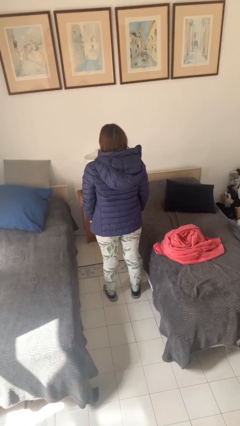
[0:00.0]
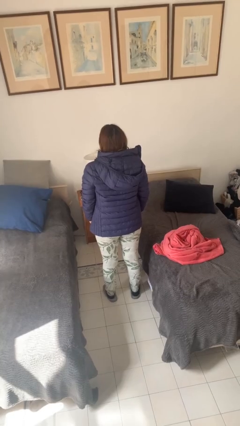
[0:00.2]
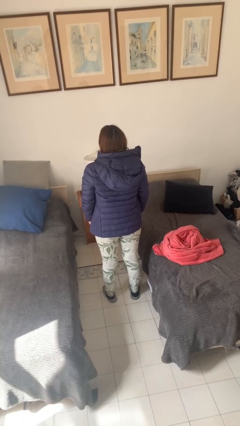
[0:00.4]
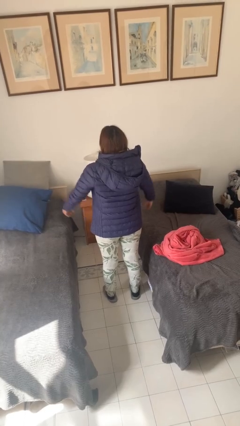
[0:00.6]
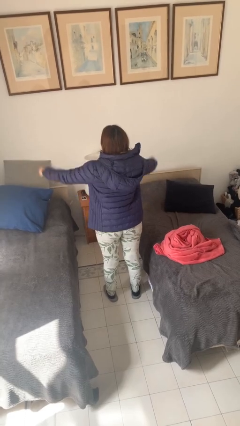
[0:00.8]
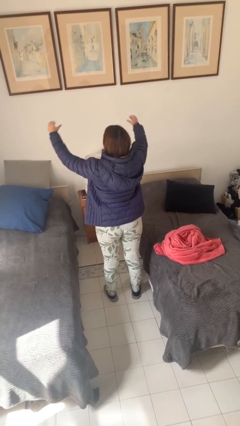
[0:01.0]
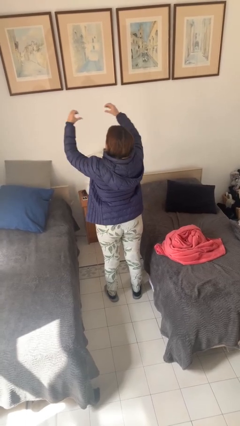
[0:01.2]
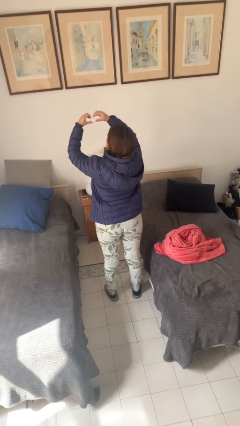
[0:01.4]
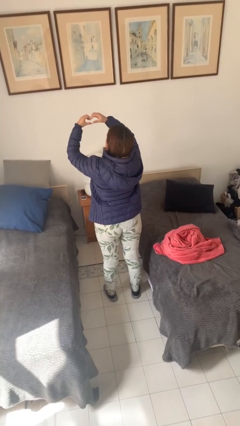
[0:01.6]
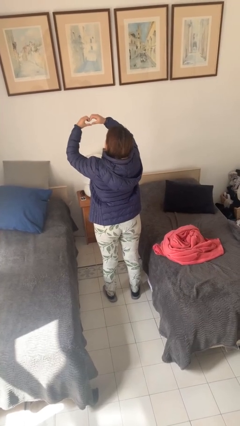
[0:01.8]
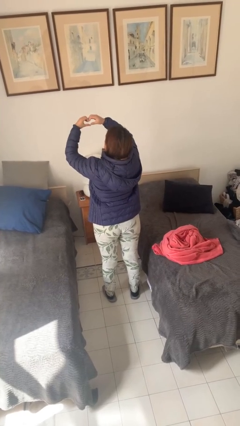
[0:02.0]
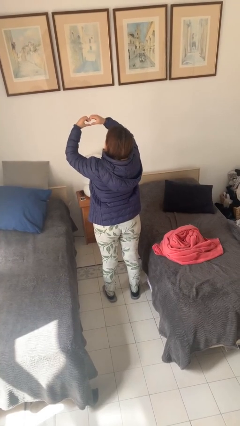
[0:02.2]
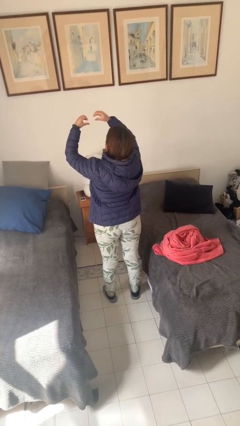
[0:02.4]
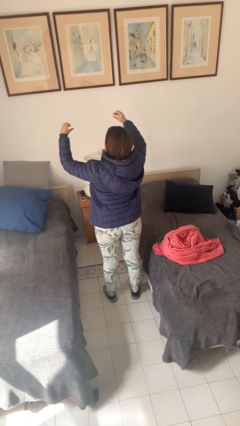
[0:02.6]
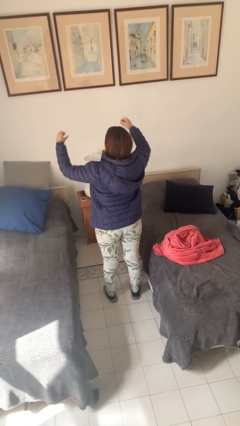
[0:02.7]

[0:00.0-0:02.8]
person gestures heart

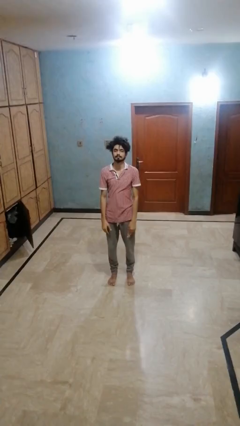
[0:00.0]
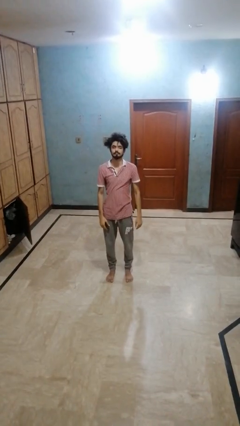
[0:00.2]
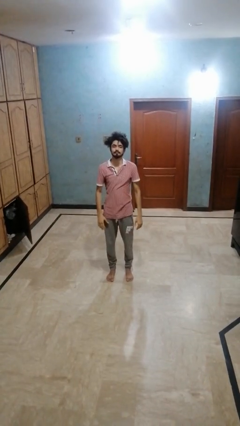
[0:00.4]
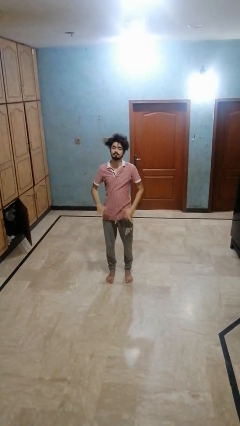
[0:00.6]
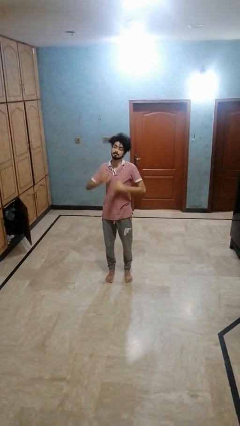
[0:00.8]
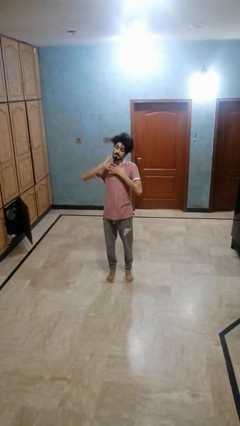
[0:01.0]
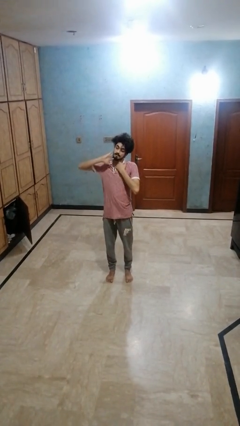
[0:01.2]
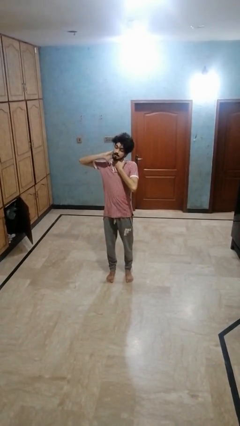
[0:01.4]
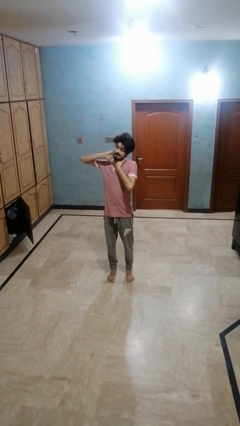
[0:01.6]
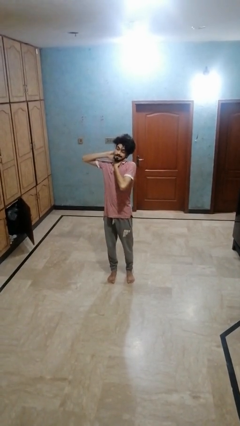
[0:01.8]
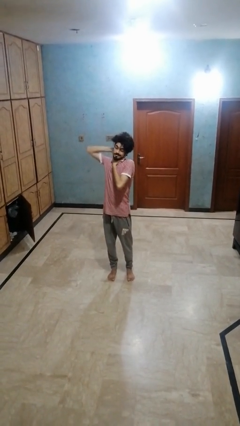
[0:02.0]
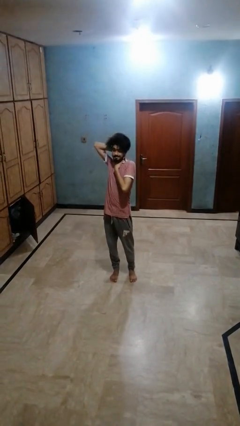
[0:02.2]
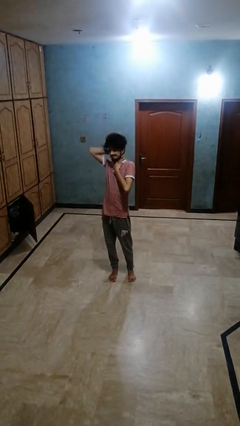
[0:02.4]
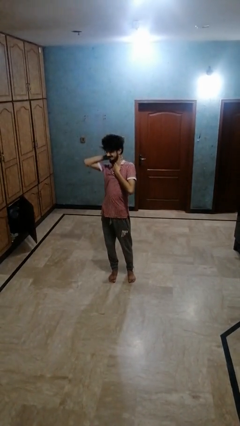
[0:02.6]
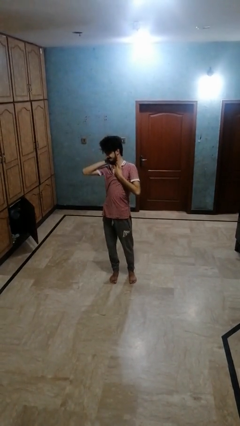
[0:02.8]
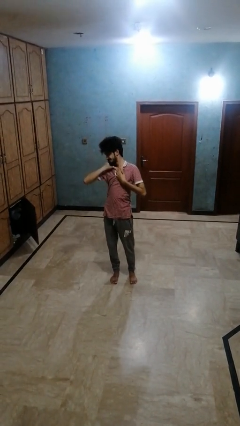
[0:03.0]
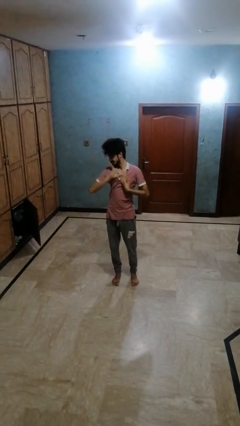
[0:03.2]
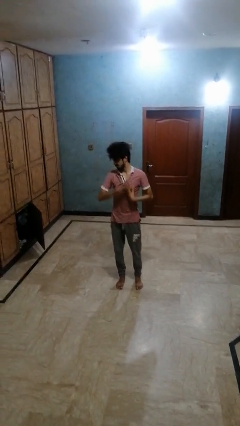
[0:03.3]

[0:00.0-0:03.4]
person rubs neck

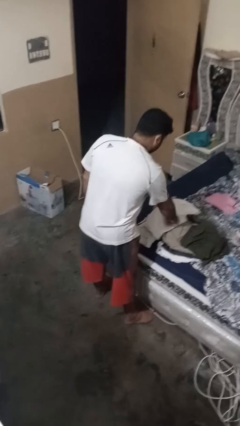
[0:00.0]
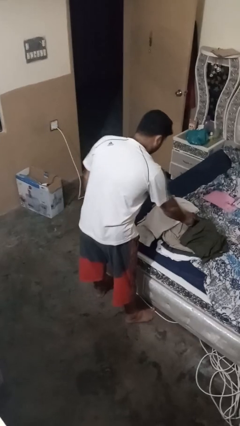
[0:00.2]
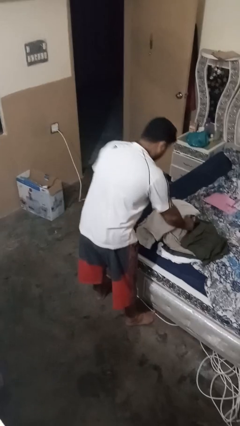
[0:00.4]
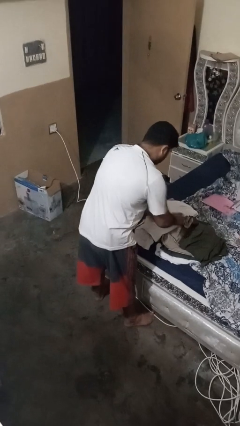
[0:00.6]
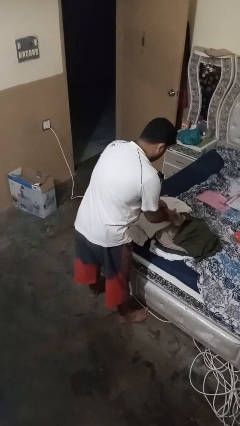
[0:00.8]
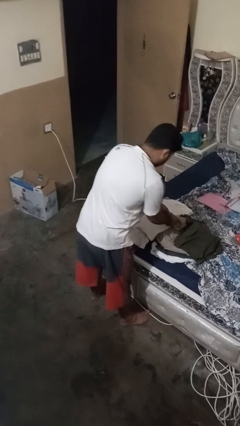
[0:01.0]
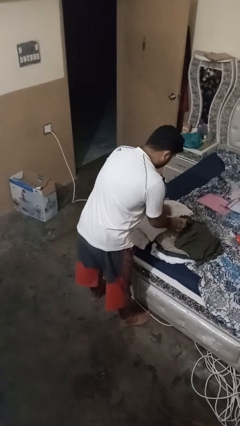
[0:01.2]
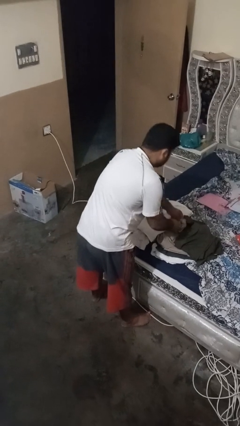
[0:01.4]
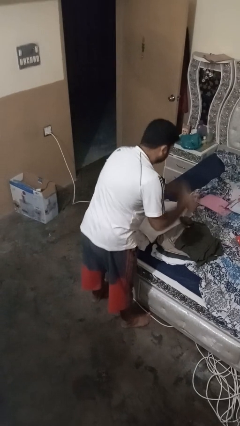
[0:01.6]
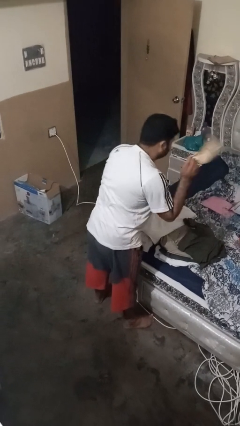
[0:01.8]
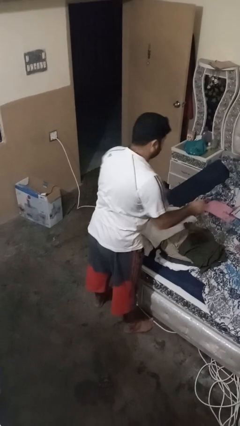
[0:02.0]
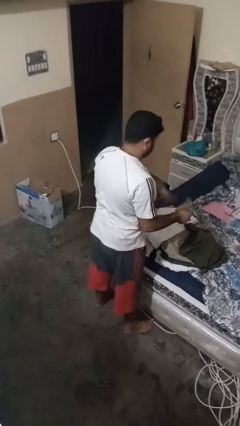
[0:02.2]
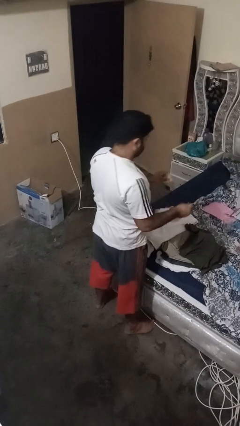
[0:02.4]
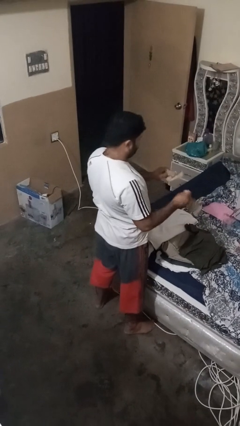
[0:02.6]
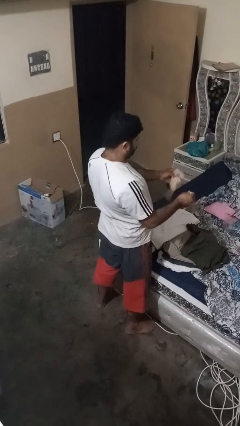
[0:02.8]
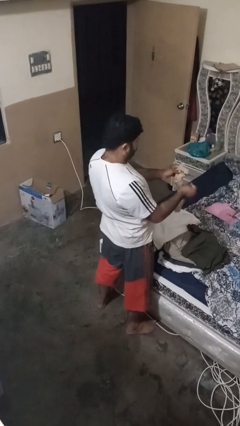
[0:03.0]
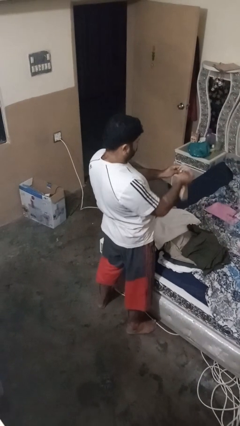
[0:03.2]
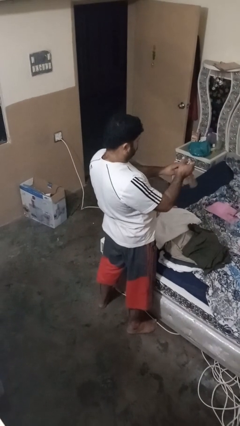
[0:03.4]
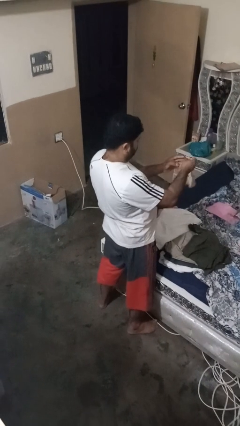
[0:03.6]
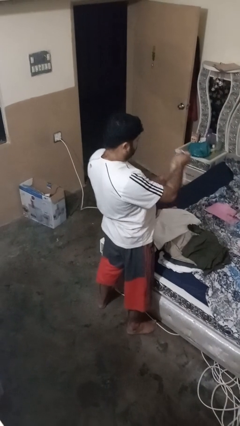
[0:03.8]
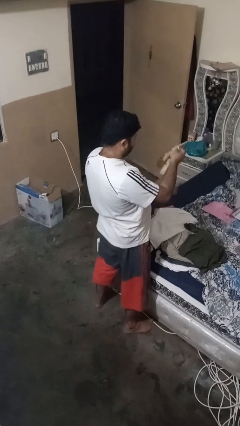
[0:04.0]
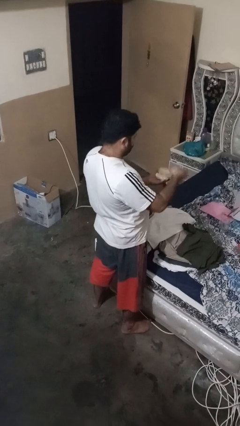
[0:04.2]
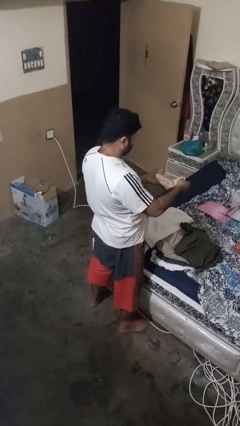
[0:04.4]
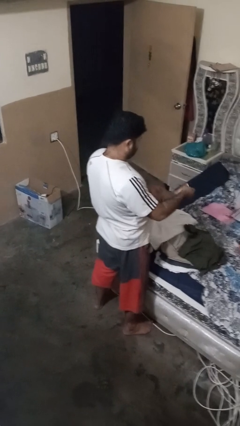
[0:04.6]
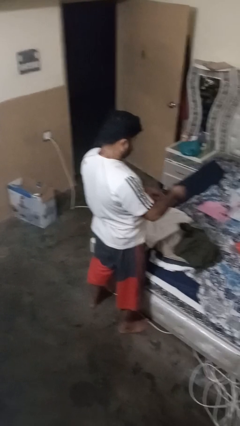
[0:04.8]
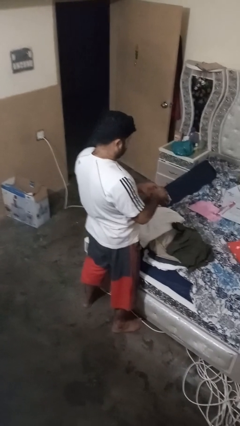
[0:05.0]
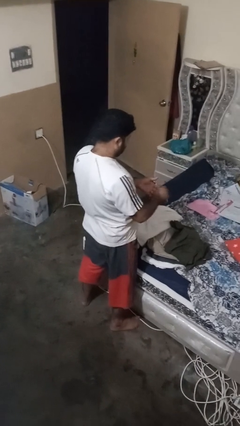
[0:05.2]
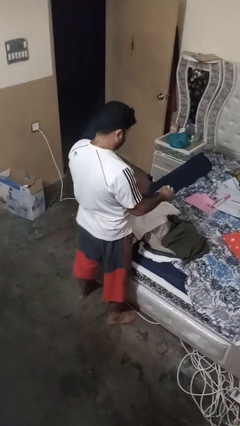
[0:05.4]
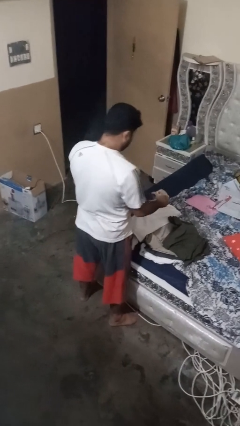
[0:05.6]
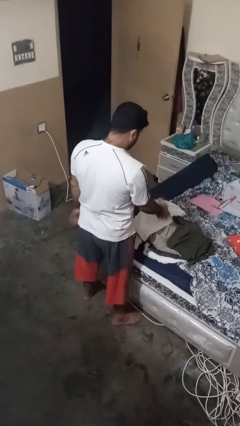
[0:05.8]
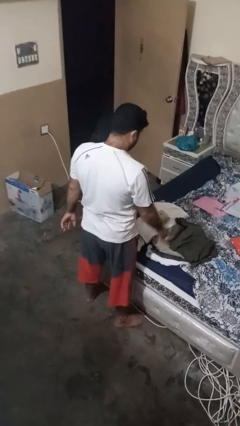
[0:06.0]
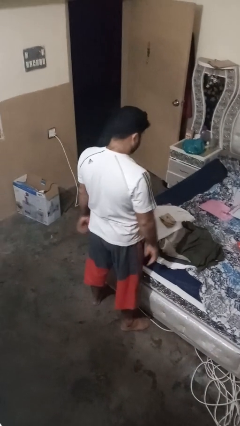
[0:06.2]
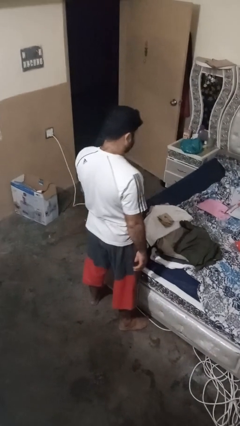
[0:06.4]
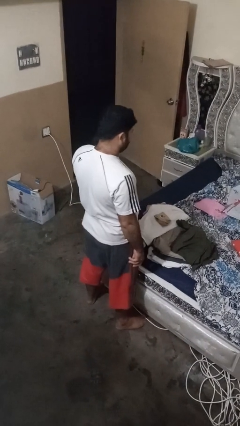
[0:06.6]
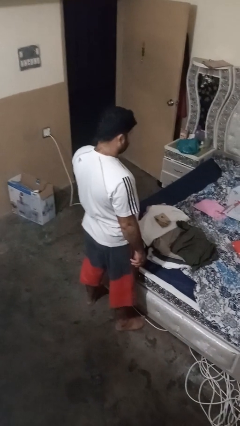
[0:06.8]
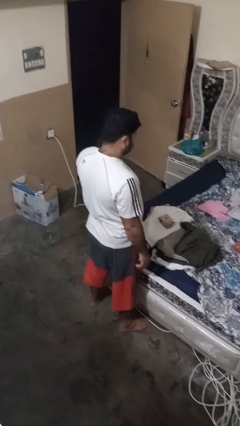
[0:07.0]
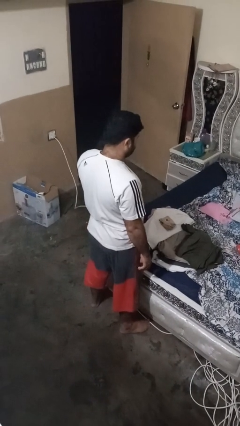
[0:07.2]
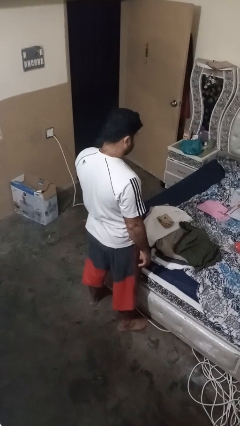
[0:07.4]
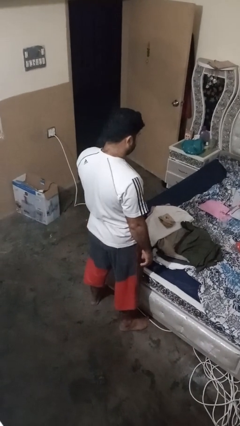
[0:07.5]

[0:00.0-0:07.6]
person folds socks

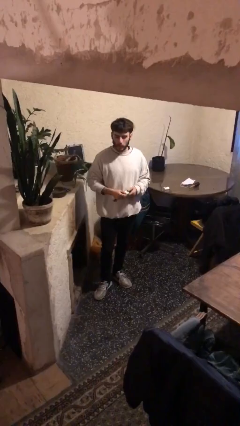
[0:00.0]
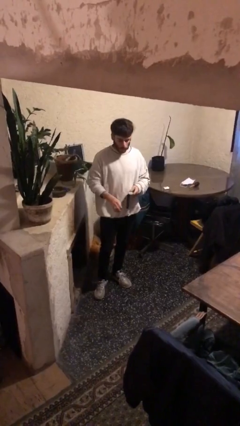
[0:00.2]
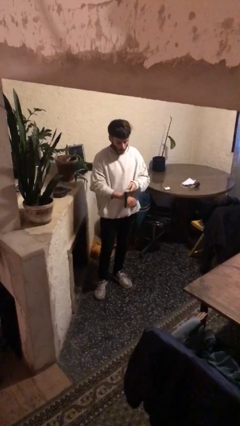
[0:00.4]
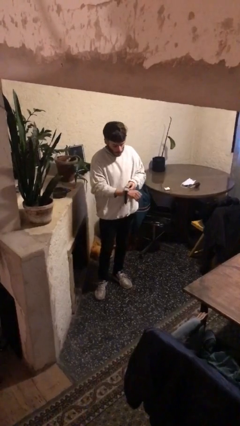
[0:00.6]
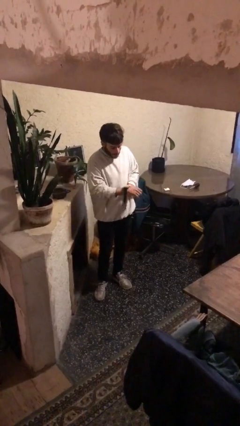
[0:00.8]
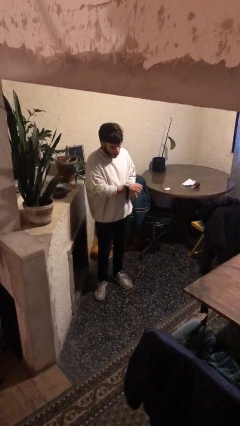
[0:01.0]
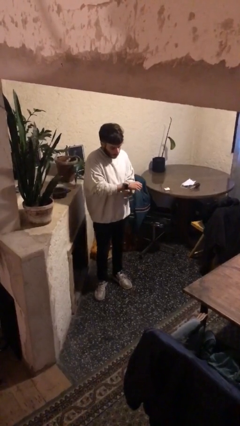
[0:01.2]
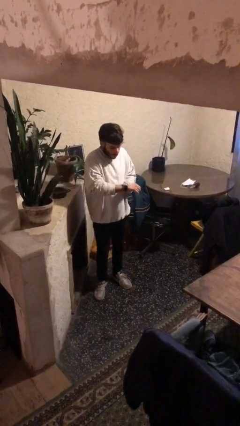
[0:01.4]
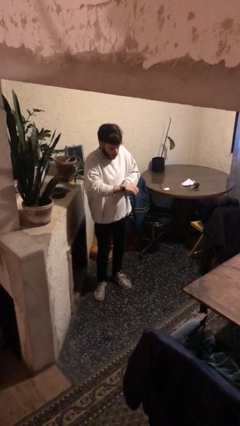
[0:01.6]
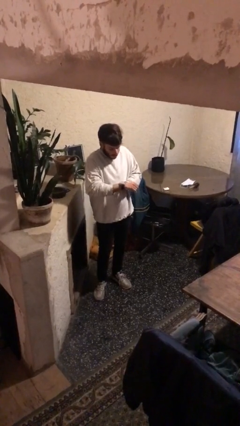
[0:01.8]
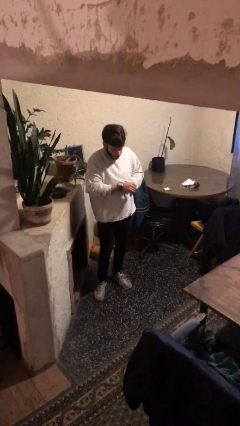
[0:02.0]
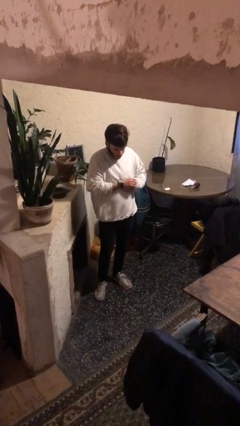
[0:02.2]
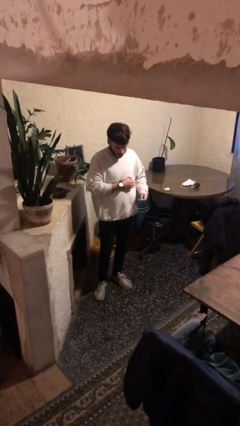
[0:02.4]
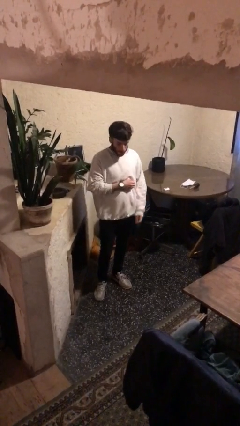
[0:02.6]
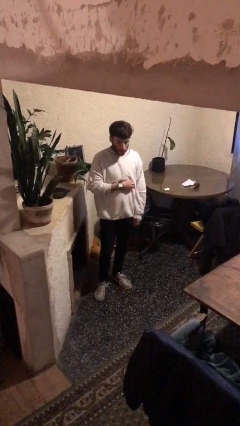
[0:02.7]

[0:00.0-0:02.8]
person puts on wristwatch

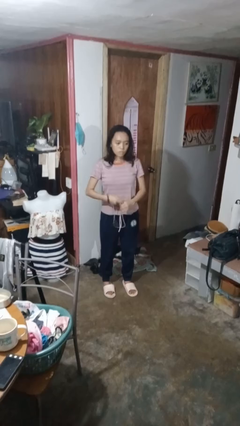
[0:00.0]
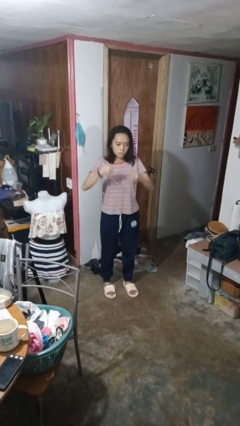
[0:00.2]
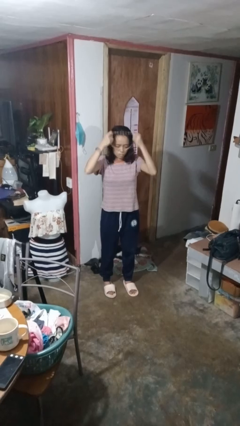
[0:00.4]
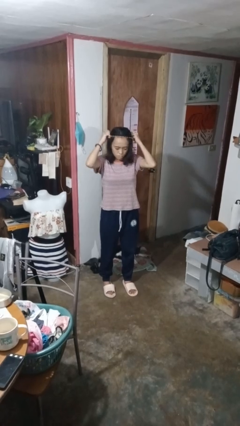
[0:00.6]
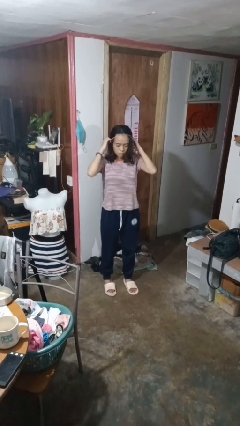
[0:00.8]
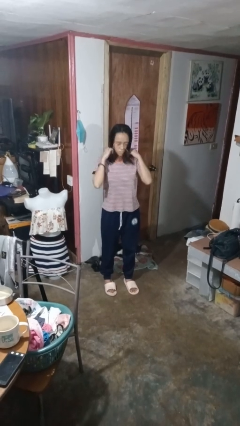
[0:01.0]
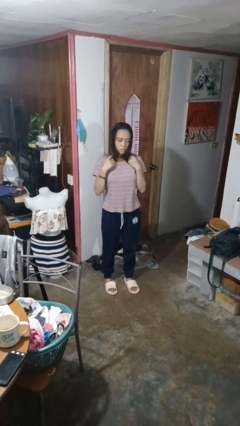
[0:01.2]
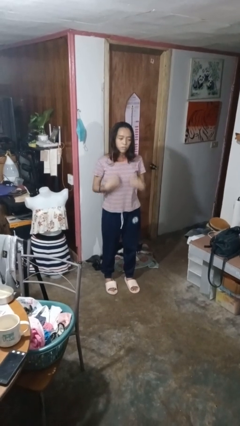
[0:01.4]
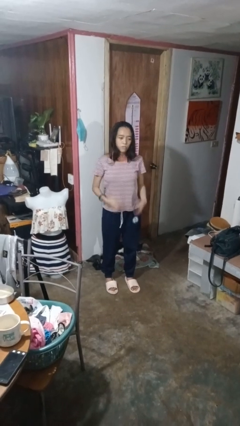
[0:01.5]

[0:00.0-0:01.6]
person puts on necklace
